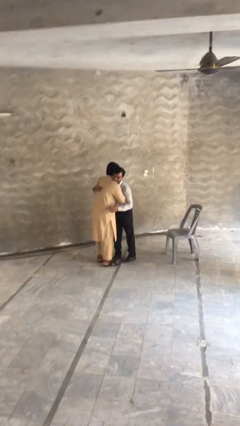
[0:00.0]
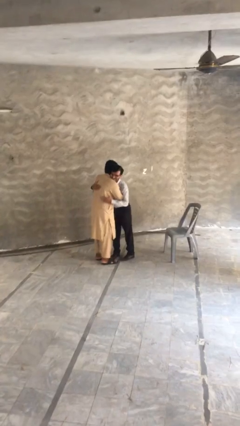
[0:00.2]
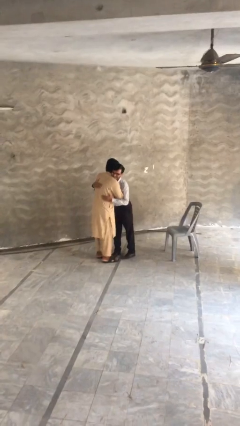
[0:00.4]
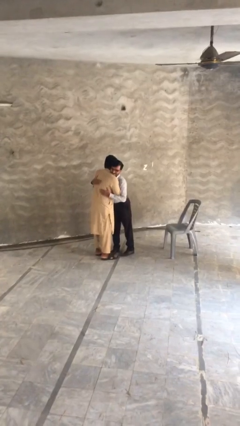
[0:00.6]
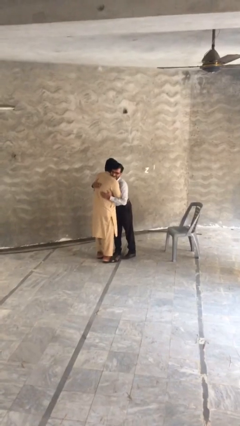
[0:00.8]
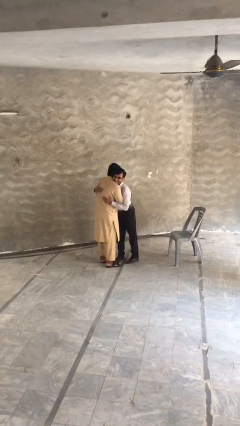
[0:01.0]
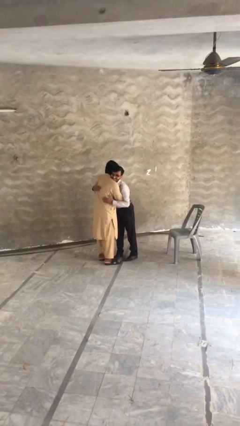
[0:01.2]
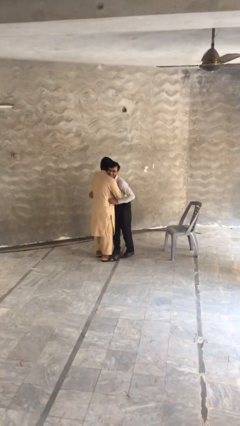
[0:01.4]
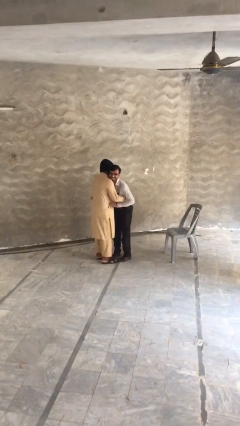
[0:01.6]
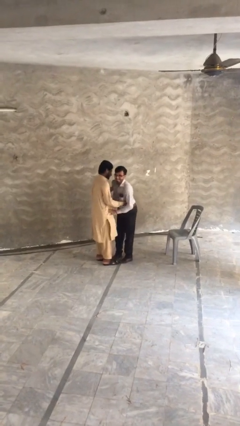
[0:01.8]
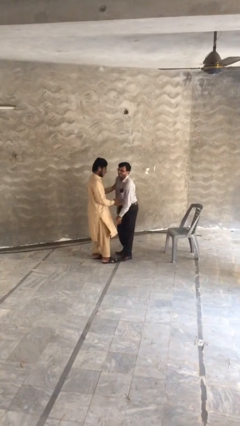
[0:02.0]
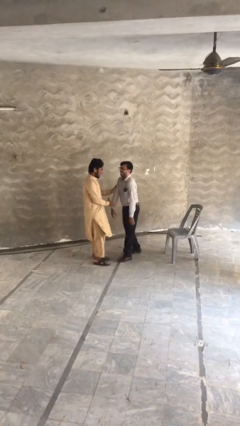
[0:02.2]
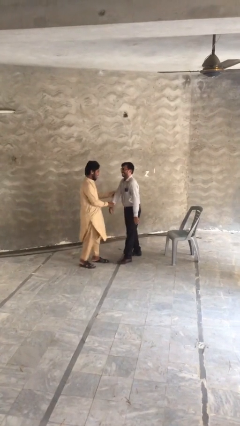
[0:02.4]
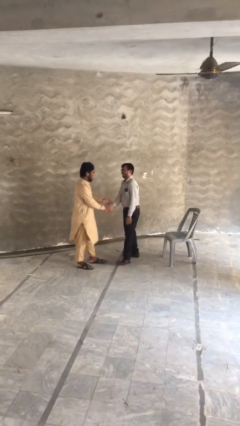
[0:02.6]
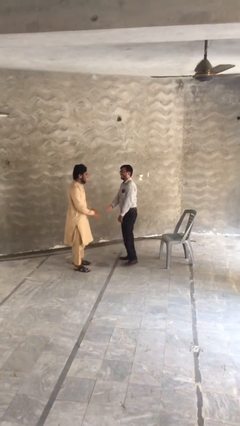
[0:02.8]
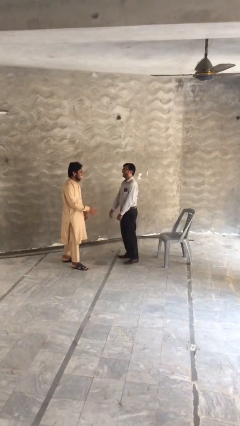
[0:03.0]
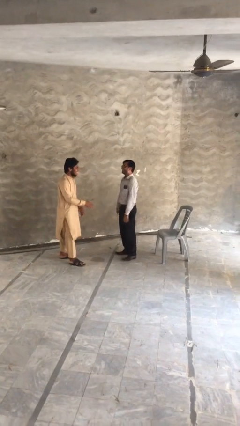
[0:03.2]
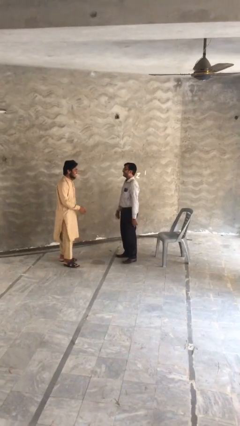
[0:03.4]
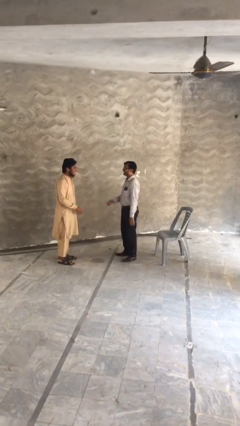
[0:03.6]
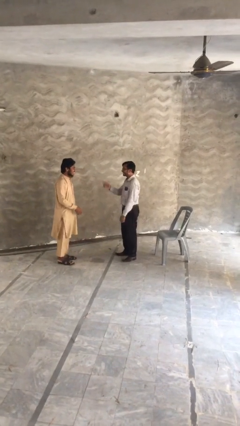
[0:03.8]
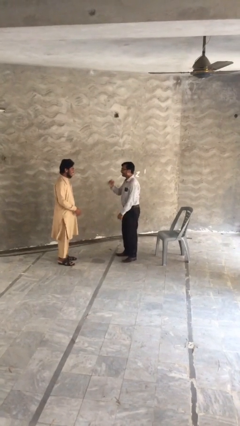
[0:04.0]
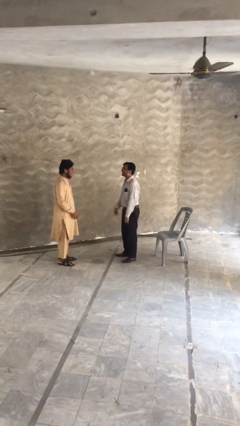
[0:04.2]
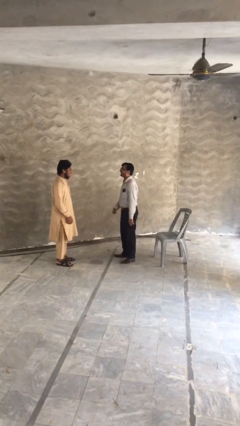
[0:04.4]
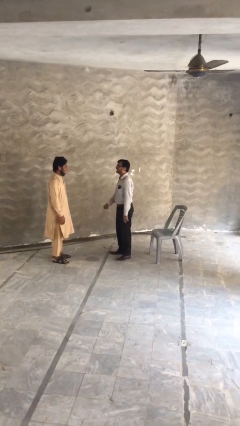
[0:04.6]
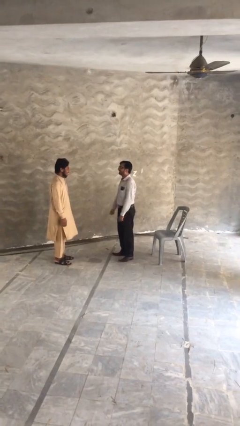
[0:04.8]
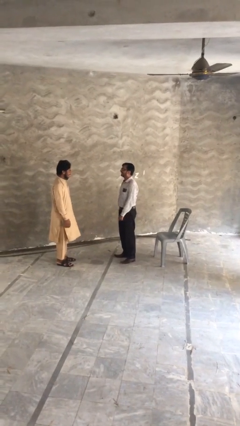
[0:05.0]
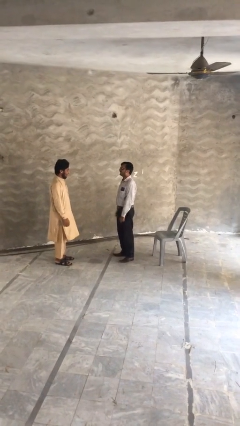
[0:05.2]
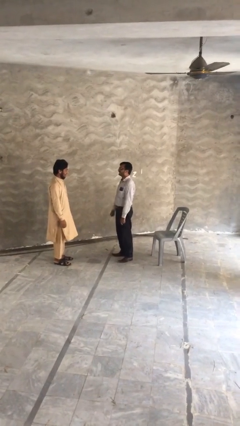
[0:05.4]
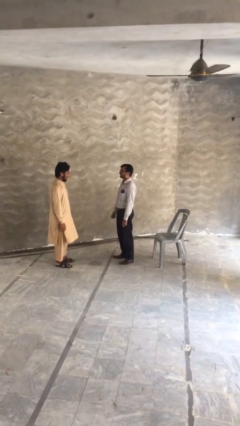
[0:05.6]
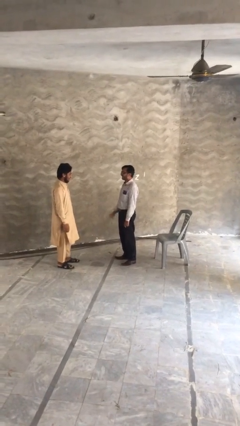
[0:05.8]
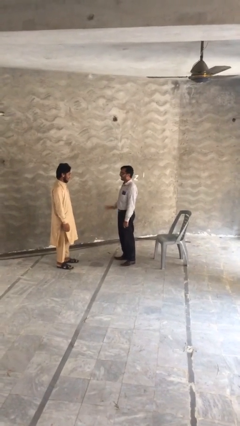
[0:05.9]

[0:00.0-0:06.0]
person talks to person

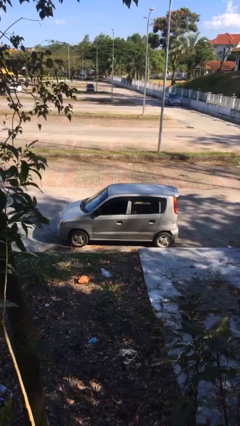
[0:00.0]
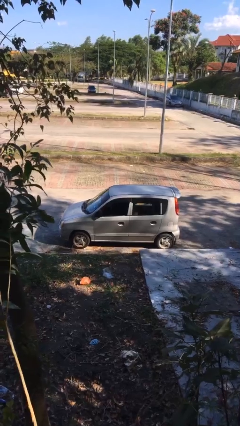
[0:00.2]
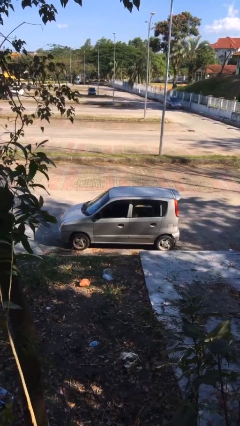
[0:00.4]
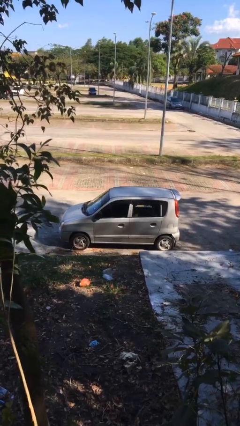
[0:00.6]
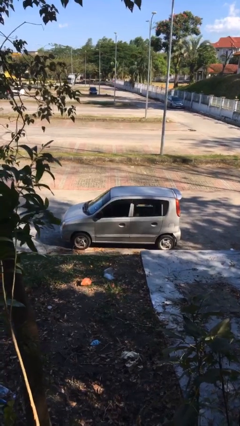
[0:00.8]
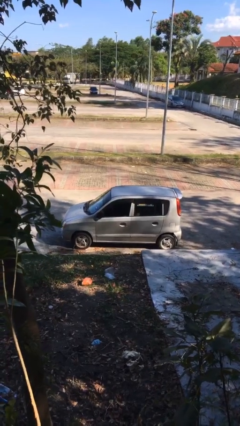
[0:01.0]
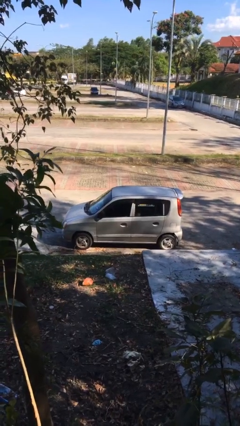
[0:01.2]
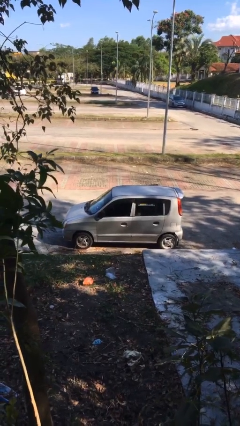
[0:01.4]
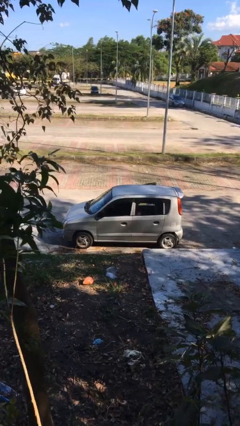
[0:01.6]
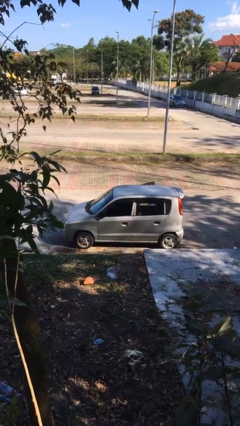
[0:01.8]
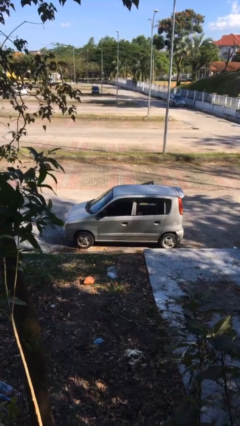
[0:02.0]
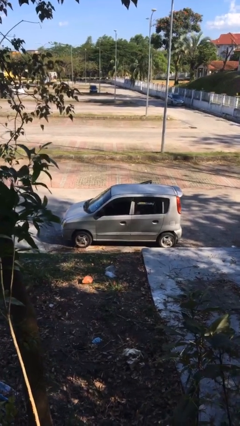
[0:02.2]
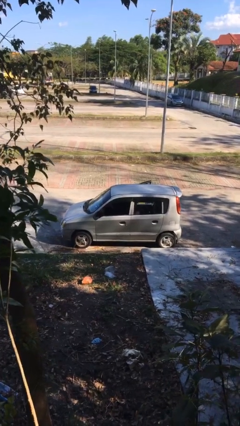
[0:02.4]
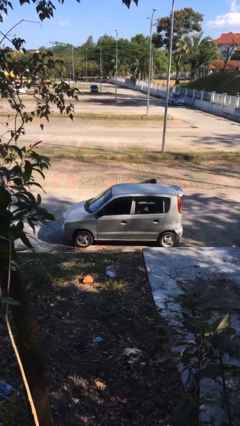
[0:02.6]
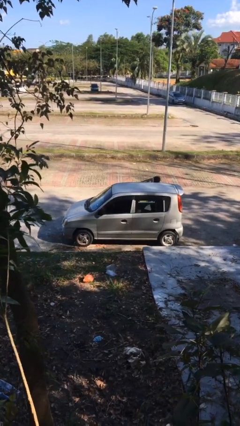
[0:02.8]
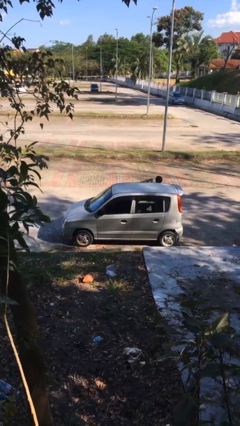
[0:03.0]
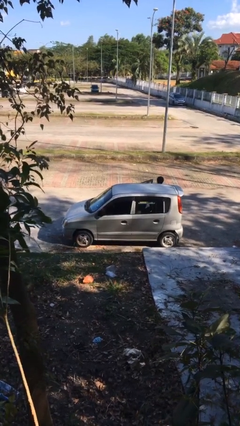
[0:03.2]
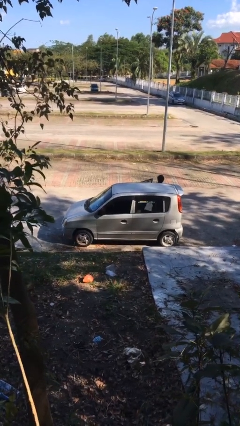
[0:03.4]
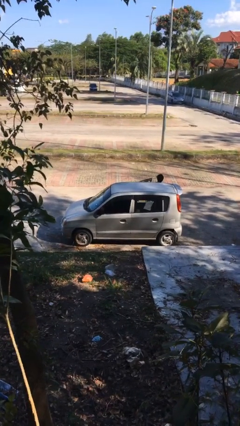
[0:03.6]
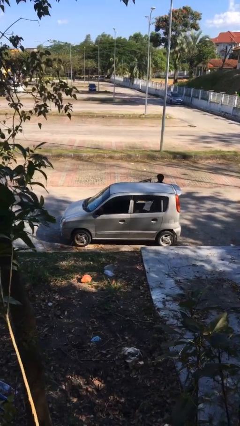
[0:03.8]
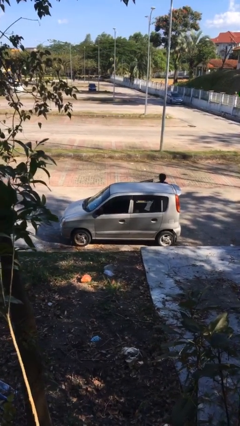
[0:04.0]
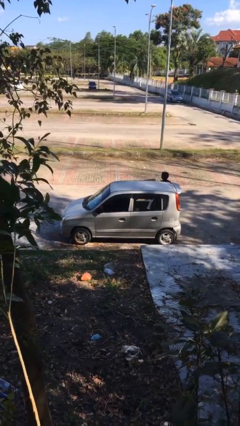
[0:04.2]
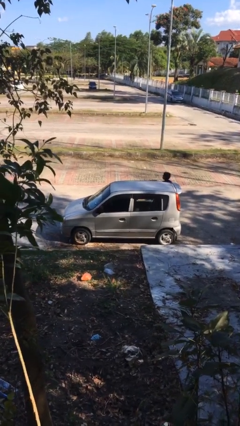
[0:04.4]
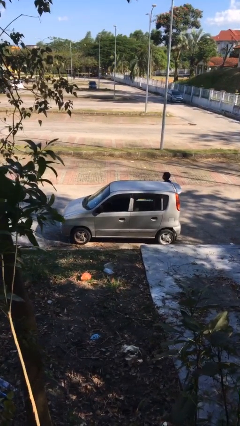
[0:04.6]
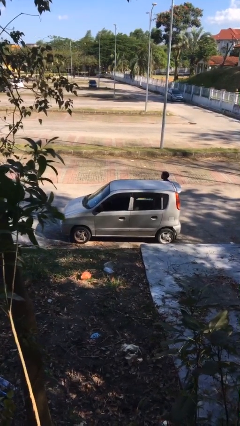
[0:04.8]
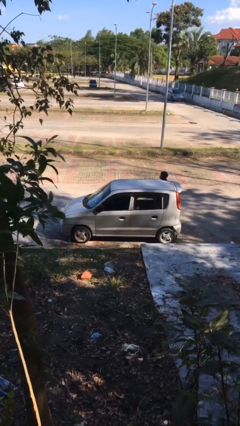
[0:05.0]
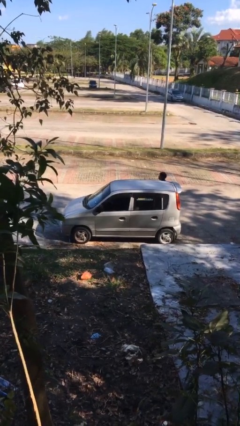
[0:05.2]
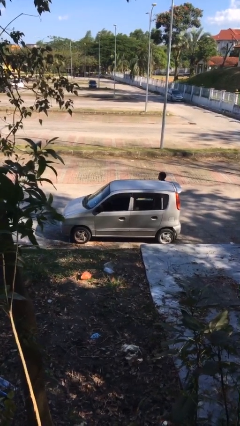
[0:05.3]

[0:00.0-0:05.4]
car drops off person

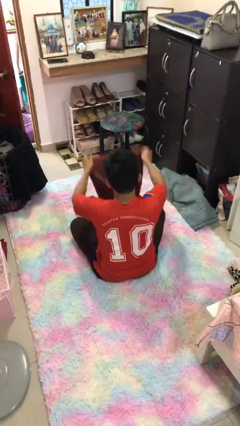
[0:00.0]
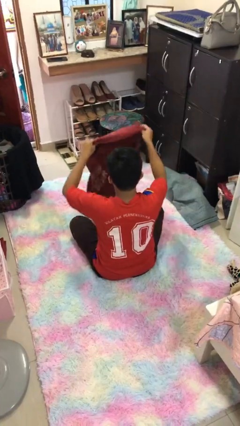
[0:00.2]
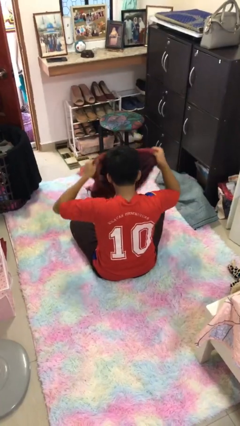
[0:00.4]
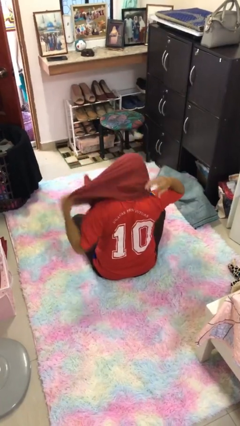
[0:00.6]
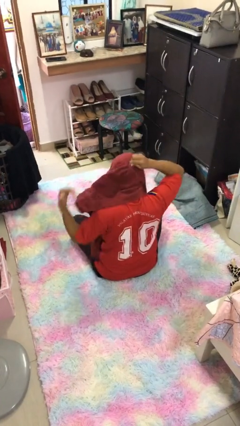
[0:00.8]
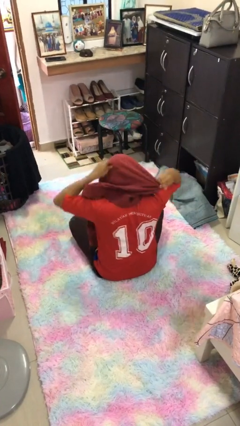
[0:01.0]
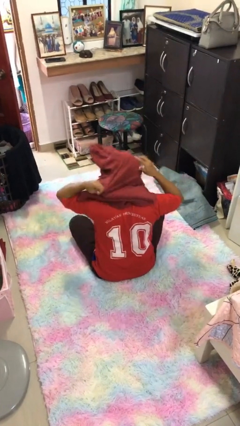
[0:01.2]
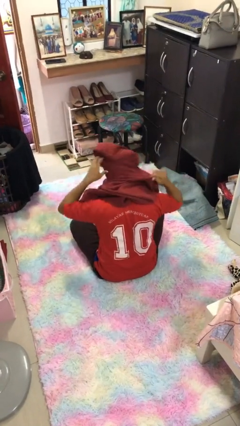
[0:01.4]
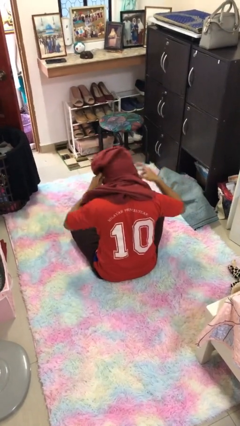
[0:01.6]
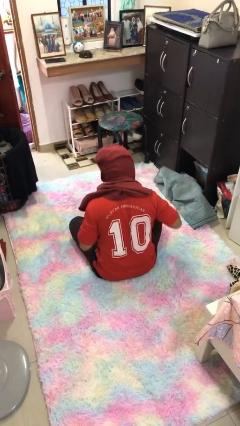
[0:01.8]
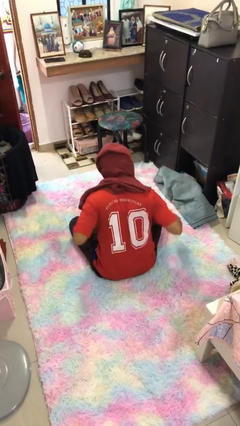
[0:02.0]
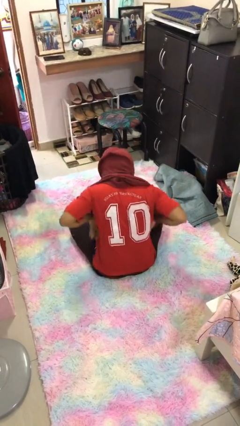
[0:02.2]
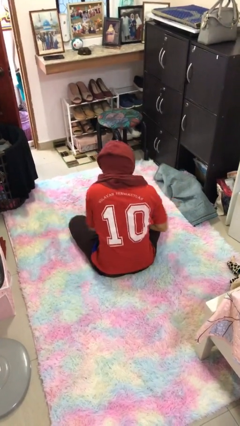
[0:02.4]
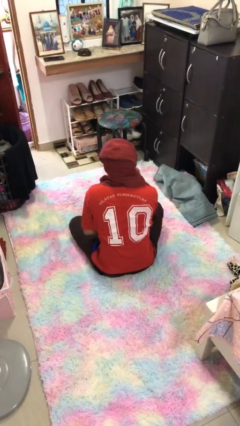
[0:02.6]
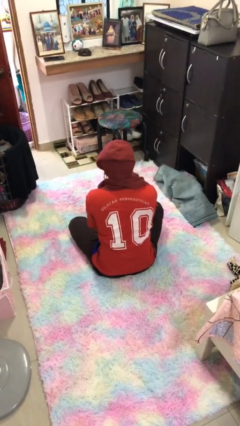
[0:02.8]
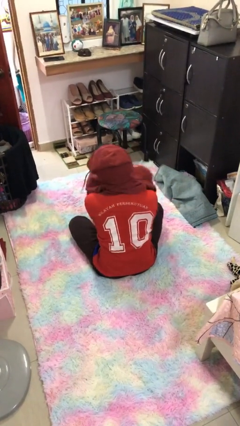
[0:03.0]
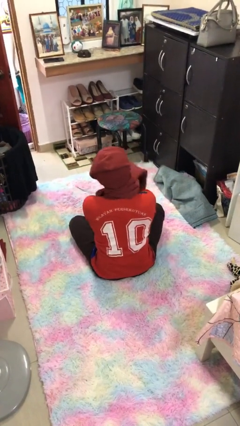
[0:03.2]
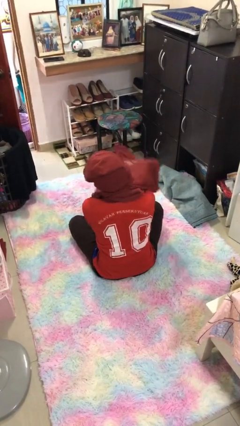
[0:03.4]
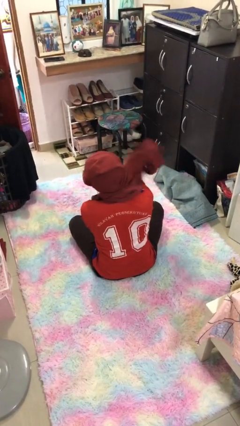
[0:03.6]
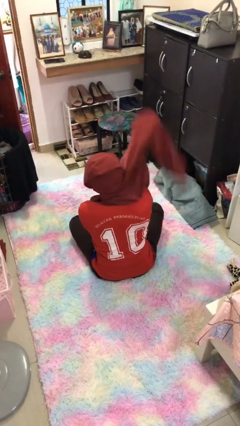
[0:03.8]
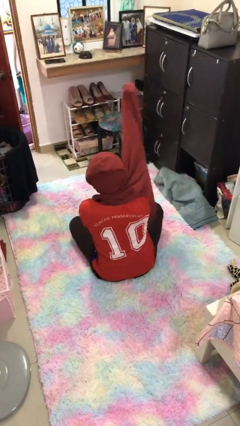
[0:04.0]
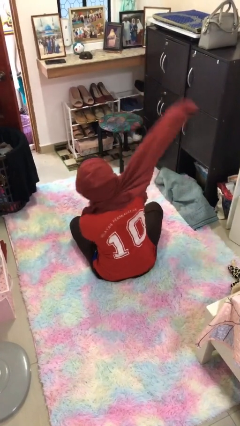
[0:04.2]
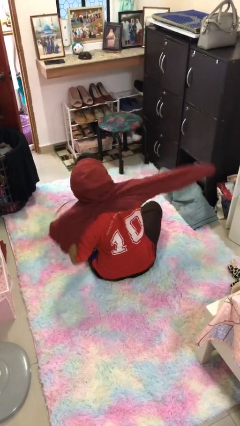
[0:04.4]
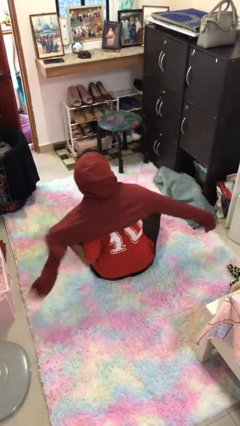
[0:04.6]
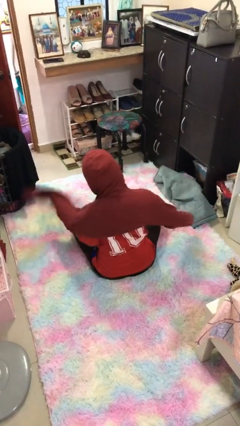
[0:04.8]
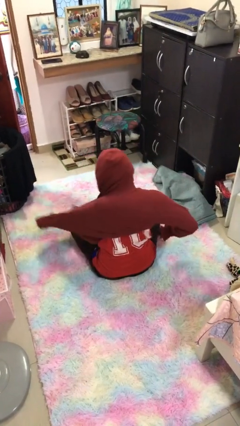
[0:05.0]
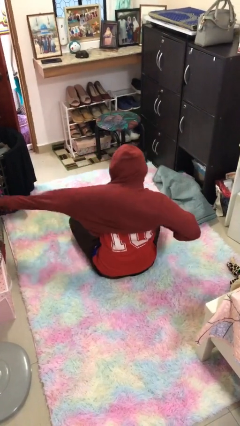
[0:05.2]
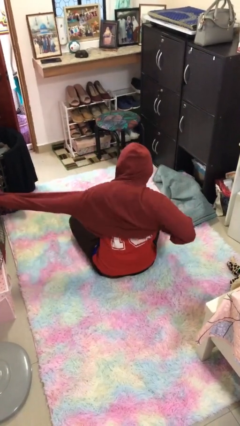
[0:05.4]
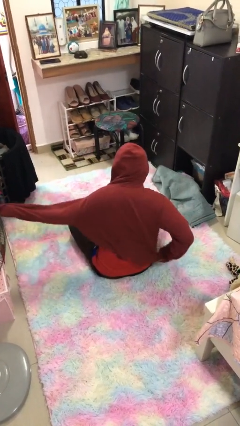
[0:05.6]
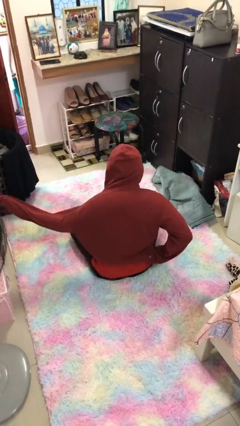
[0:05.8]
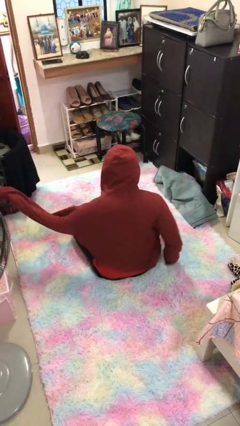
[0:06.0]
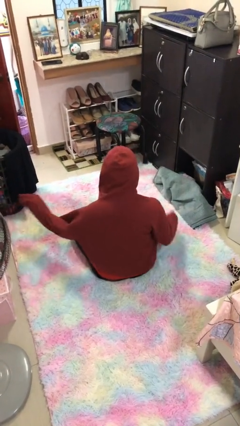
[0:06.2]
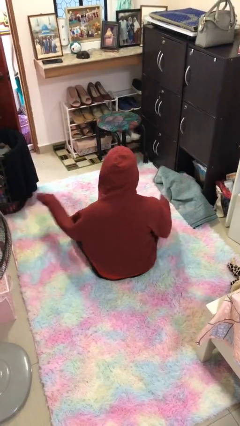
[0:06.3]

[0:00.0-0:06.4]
person puts on hoodie
